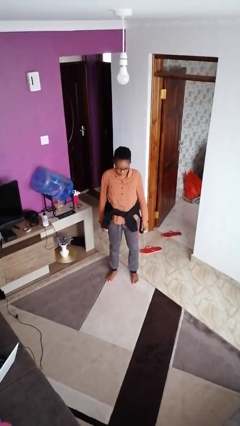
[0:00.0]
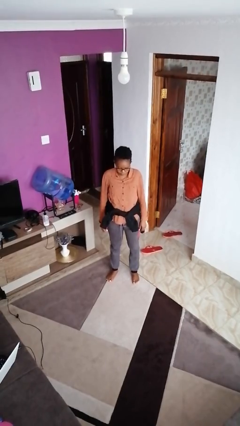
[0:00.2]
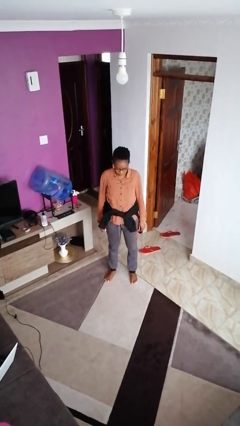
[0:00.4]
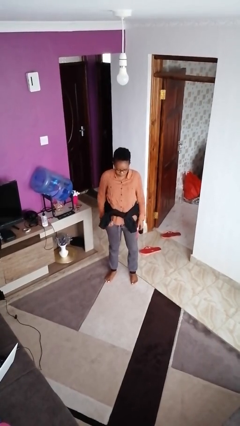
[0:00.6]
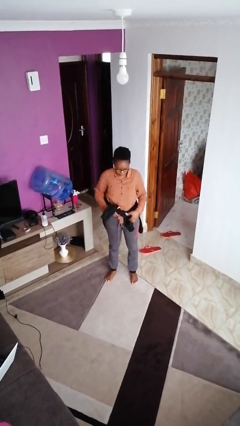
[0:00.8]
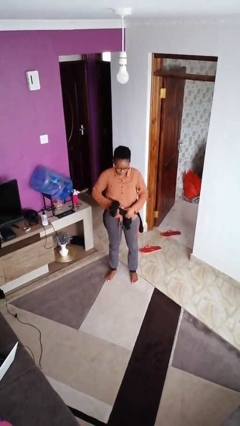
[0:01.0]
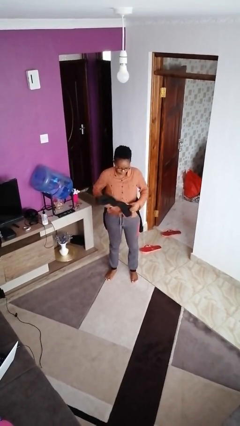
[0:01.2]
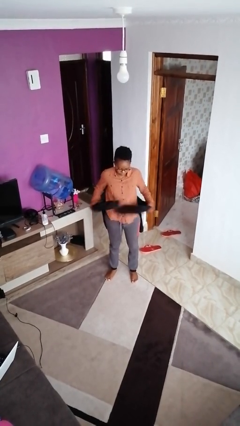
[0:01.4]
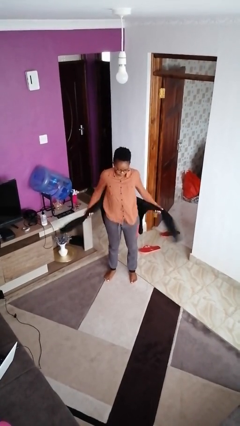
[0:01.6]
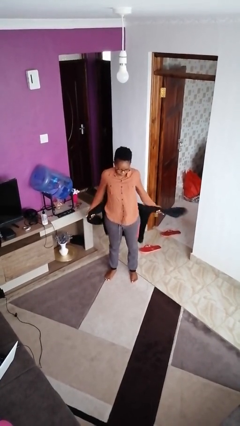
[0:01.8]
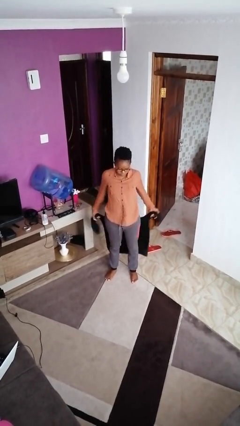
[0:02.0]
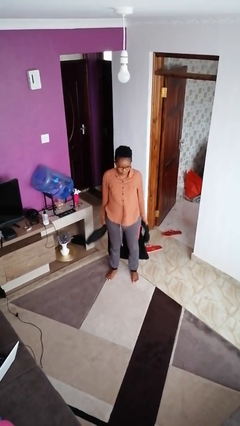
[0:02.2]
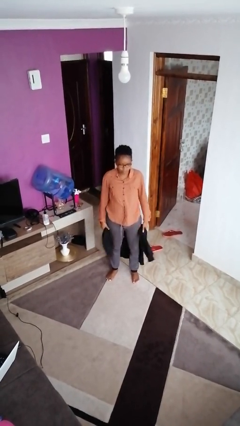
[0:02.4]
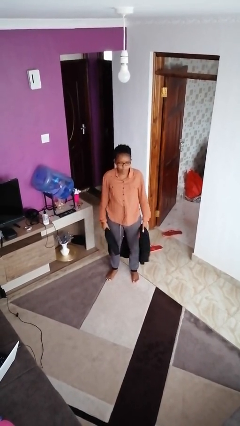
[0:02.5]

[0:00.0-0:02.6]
person unties jacket around waist

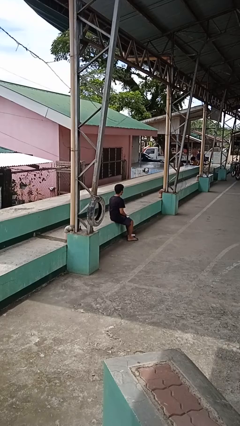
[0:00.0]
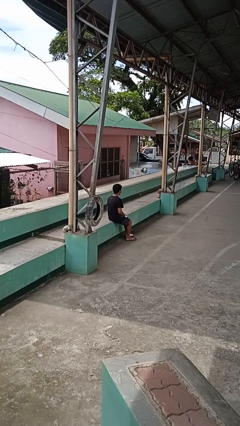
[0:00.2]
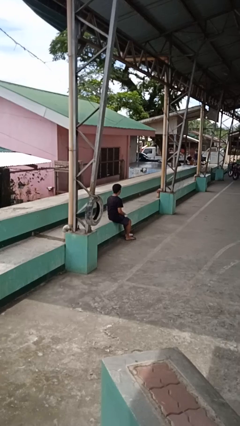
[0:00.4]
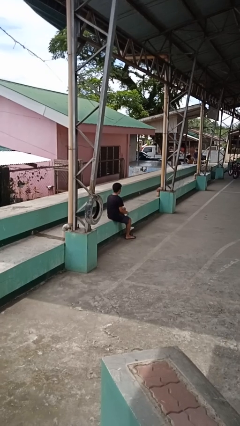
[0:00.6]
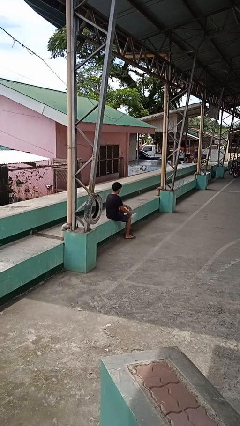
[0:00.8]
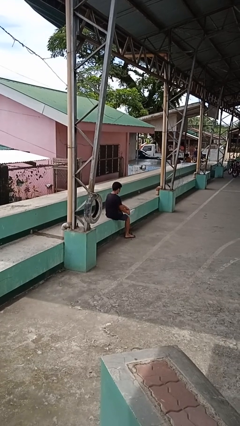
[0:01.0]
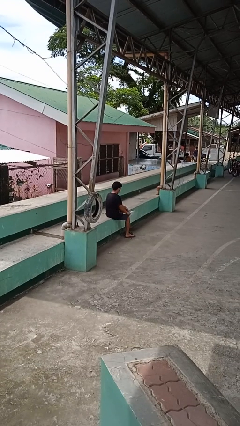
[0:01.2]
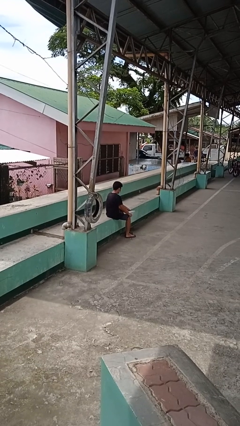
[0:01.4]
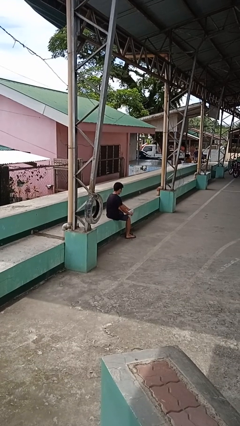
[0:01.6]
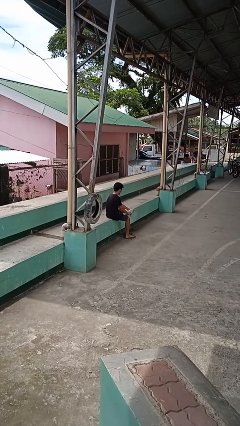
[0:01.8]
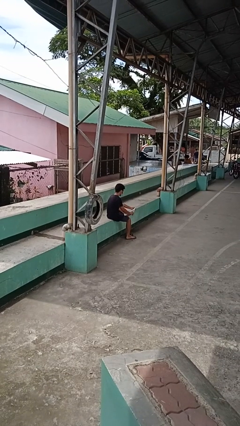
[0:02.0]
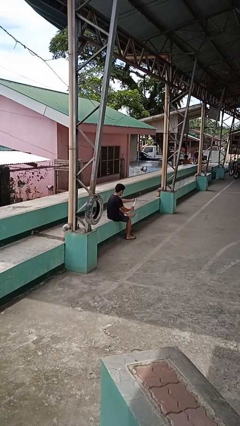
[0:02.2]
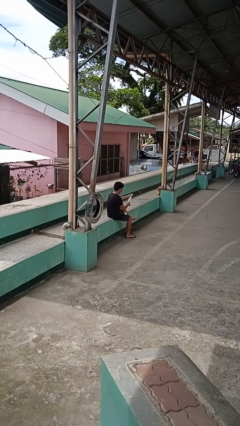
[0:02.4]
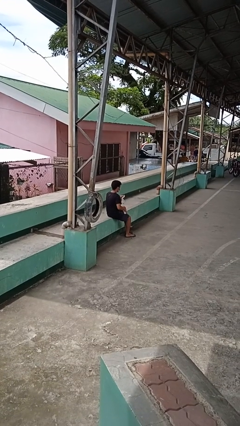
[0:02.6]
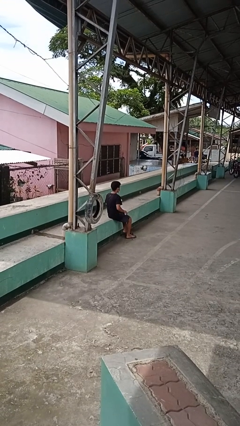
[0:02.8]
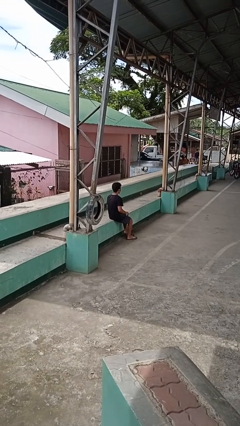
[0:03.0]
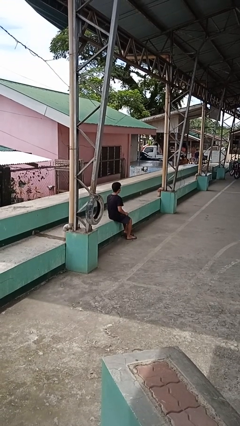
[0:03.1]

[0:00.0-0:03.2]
person takes off socks

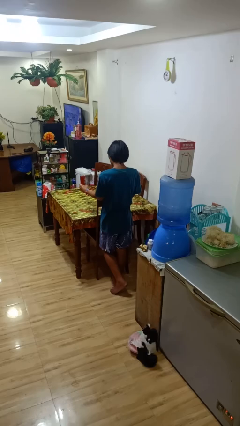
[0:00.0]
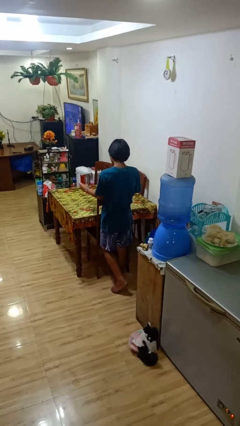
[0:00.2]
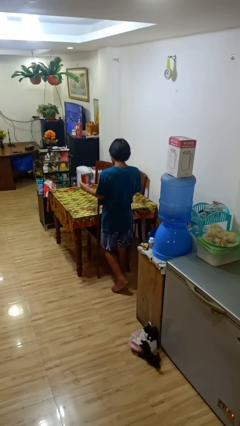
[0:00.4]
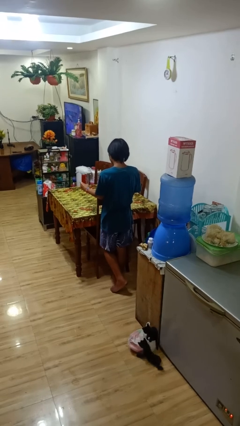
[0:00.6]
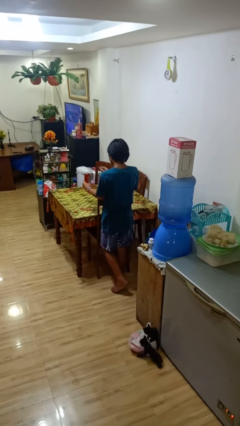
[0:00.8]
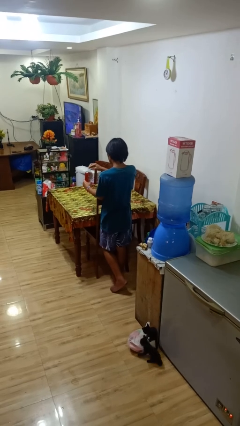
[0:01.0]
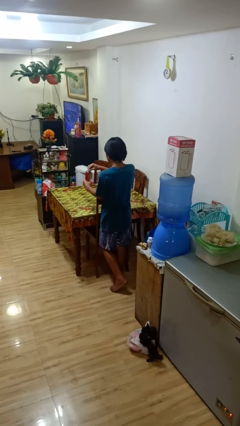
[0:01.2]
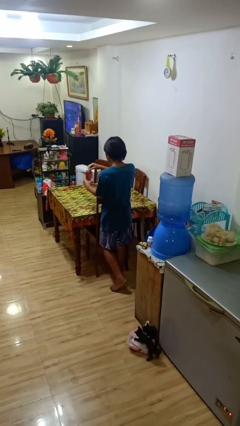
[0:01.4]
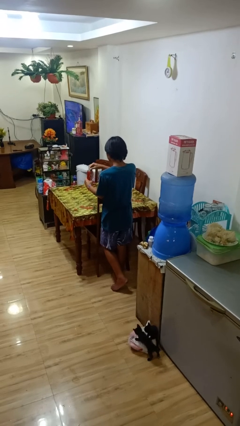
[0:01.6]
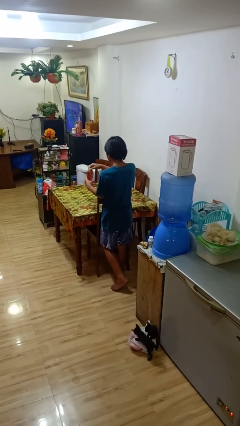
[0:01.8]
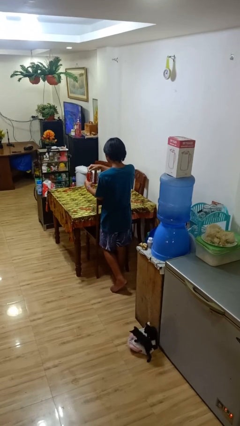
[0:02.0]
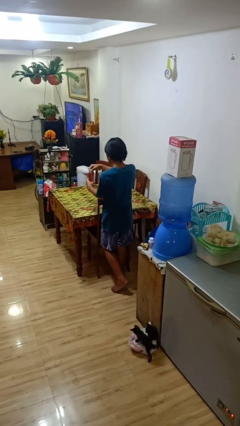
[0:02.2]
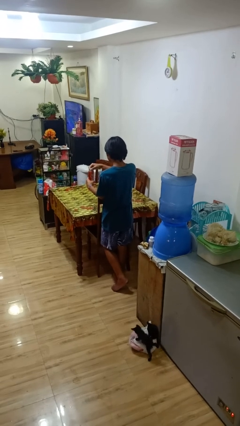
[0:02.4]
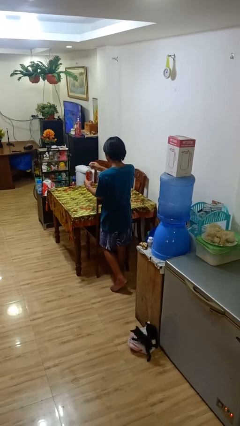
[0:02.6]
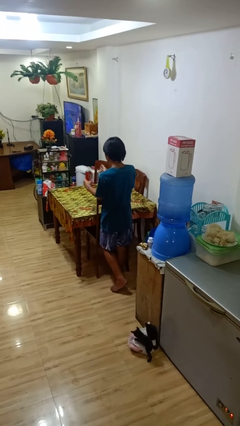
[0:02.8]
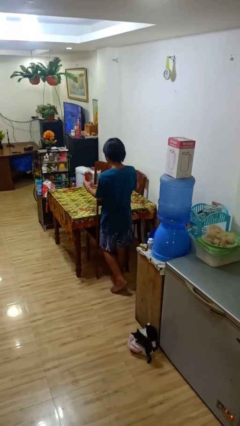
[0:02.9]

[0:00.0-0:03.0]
person opens beverage can

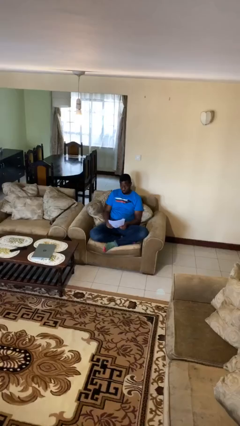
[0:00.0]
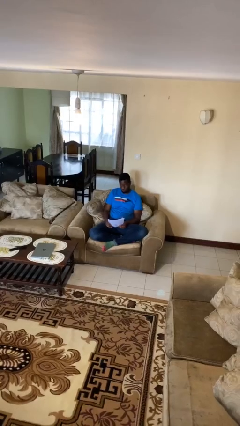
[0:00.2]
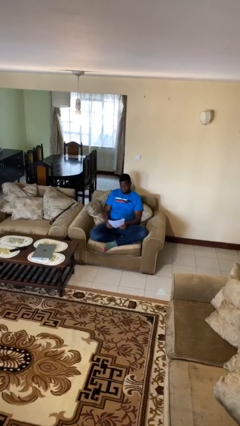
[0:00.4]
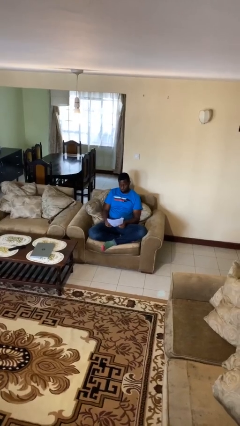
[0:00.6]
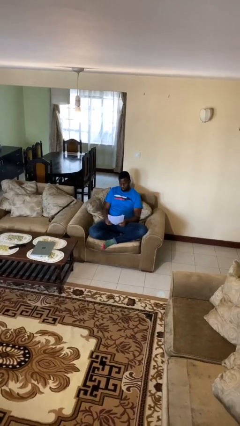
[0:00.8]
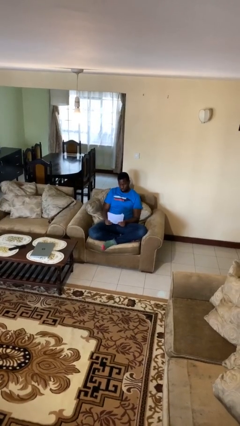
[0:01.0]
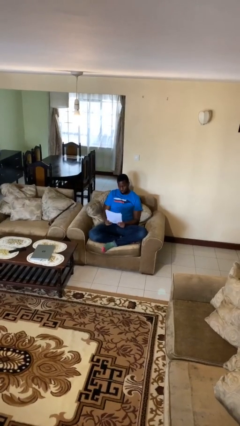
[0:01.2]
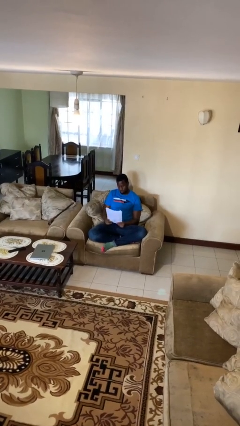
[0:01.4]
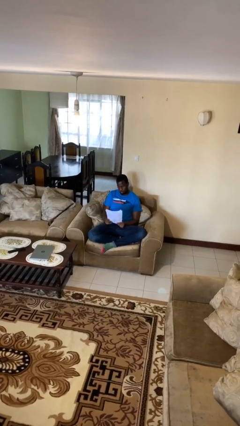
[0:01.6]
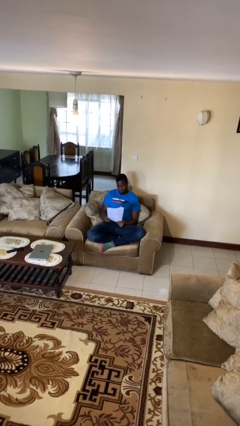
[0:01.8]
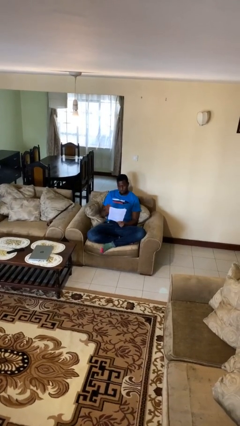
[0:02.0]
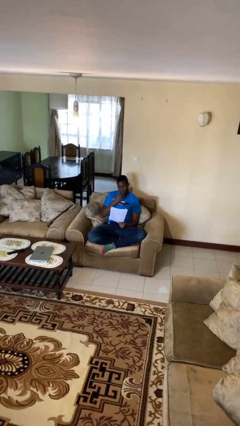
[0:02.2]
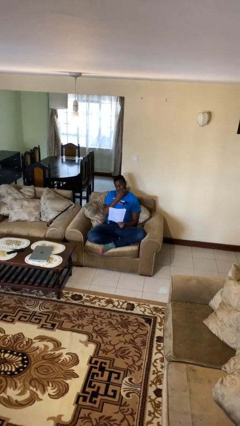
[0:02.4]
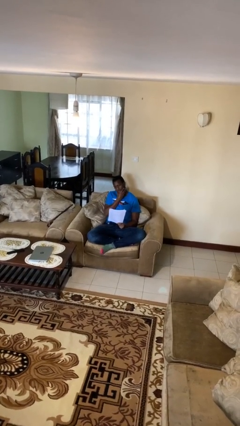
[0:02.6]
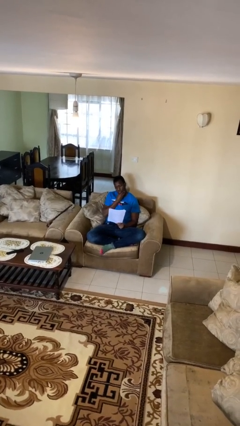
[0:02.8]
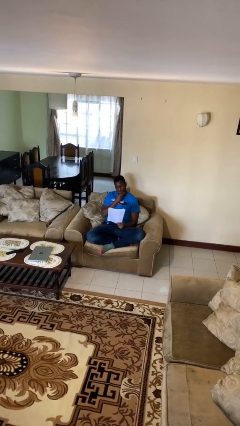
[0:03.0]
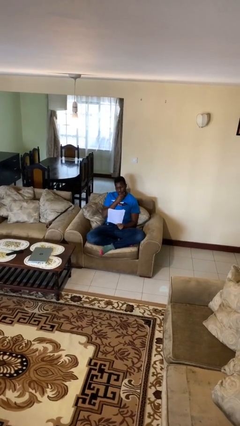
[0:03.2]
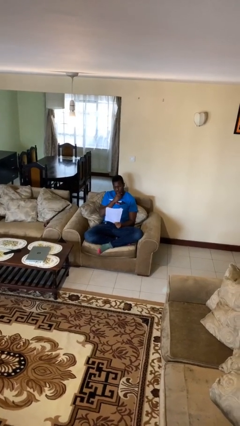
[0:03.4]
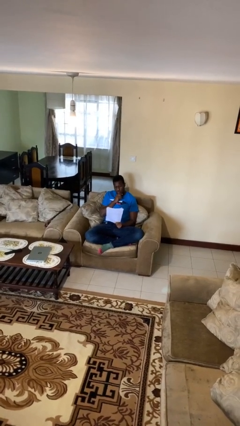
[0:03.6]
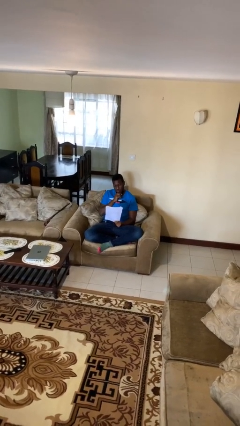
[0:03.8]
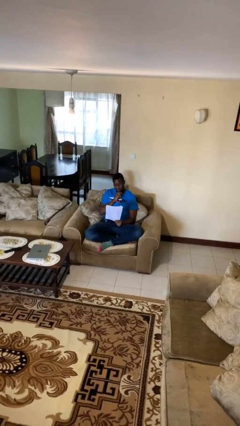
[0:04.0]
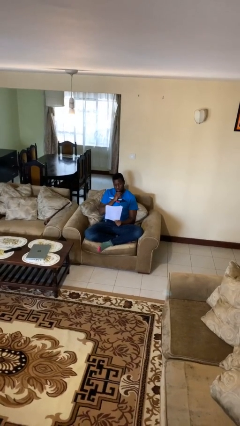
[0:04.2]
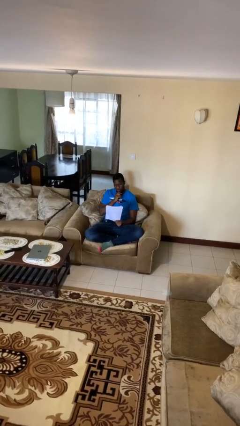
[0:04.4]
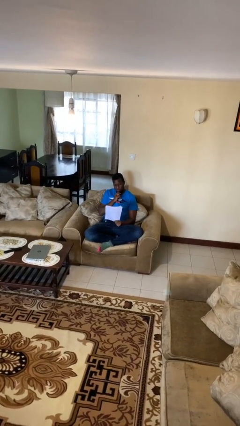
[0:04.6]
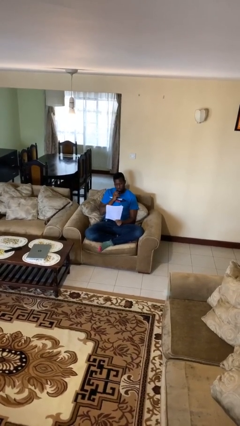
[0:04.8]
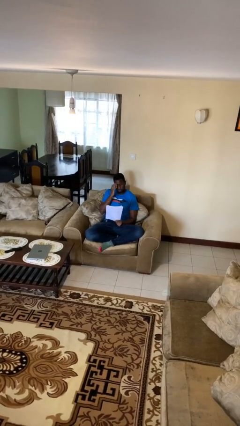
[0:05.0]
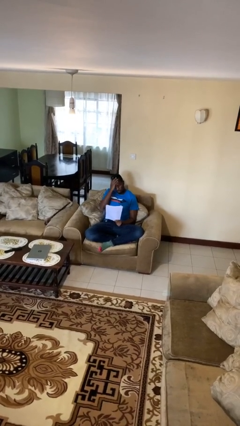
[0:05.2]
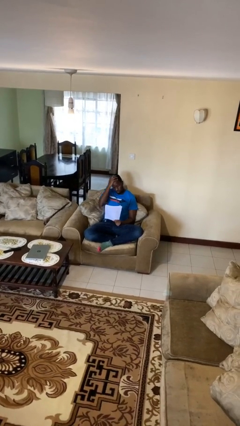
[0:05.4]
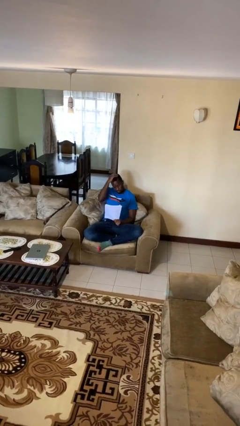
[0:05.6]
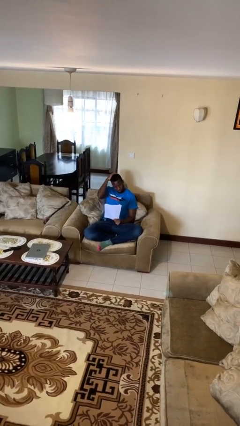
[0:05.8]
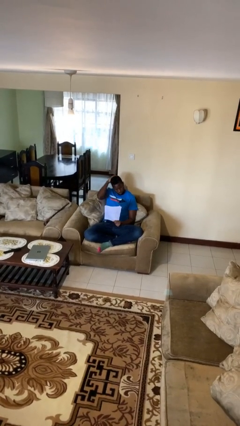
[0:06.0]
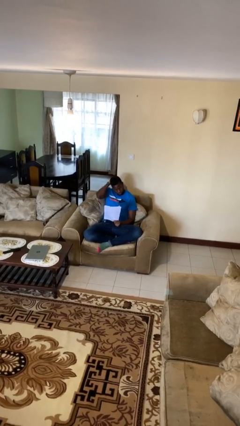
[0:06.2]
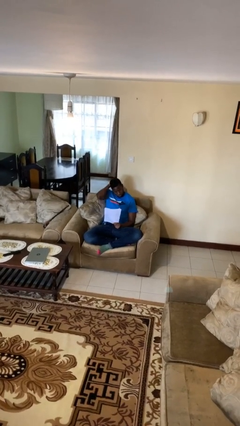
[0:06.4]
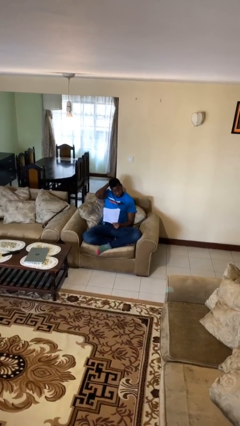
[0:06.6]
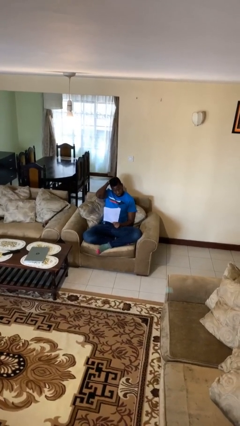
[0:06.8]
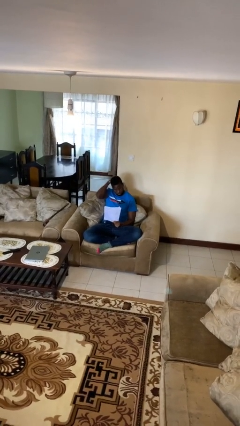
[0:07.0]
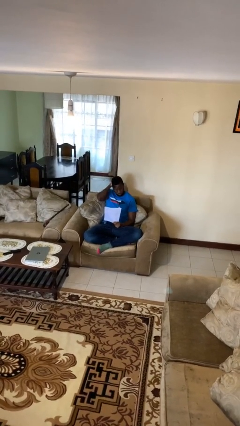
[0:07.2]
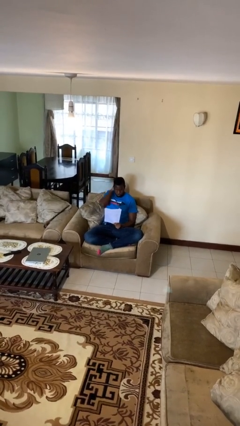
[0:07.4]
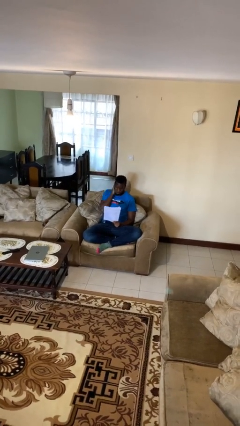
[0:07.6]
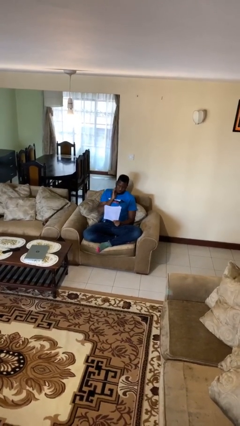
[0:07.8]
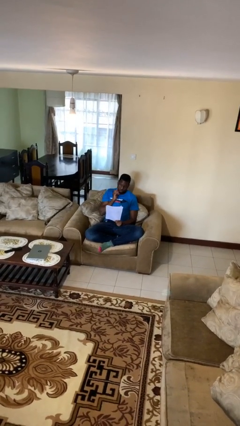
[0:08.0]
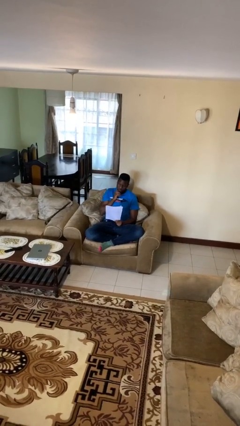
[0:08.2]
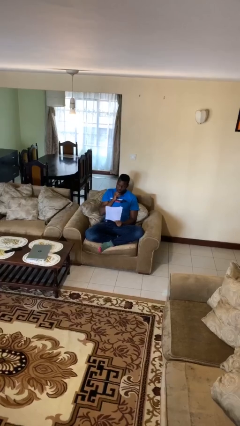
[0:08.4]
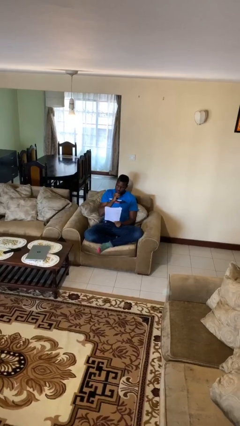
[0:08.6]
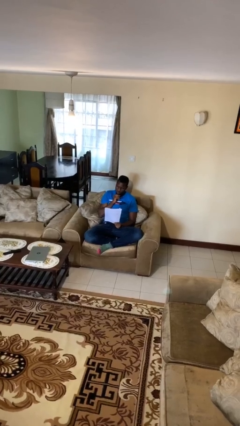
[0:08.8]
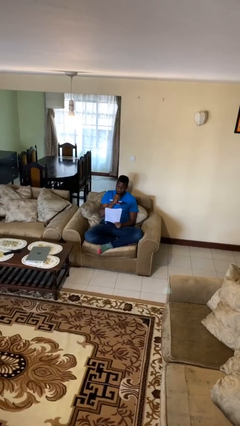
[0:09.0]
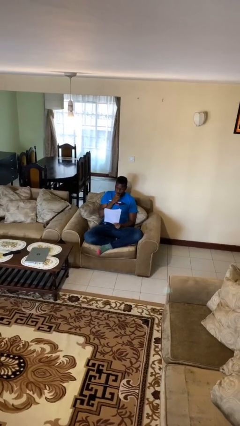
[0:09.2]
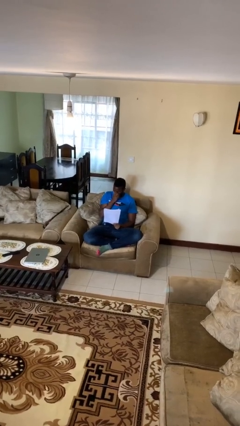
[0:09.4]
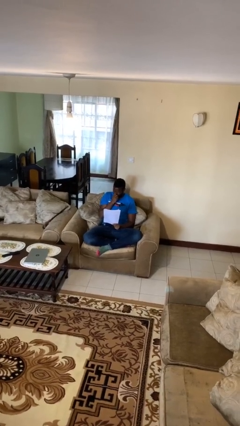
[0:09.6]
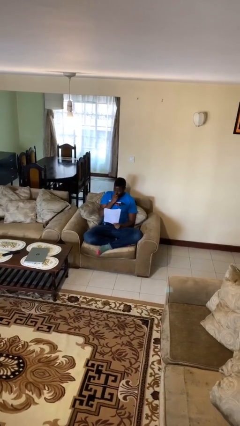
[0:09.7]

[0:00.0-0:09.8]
person reads document
